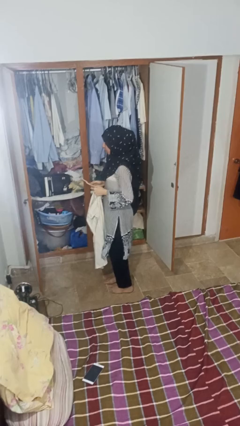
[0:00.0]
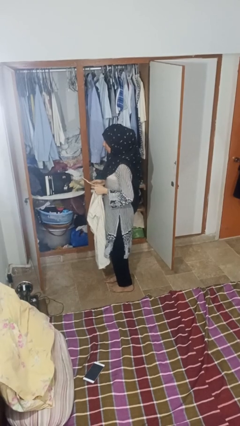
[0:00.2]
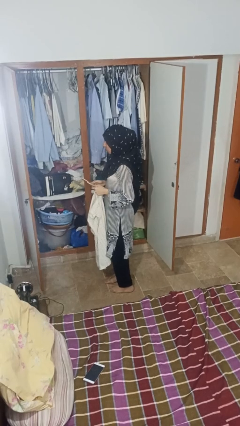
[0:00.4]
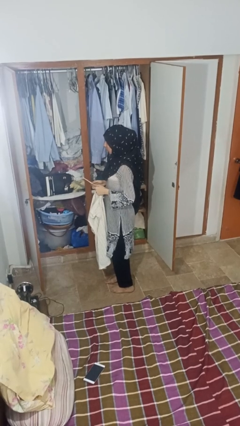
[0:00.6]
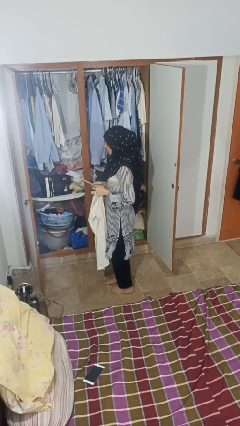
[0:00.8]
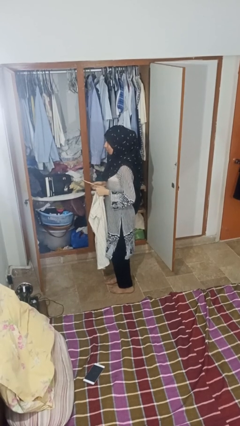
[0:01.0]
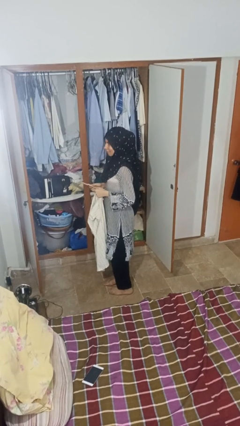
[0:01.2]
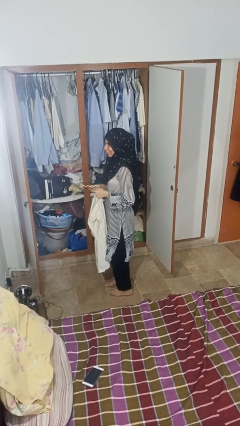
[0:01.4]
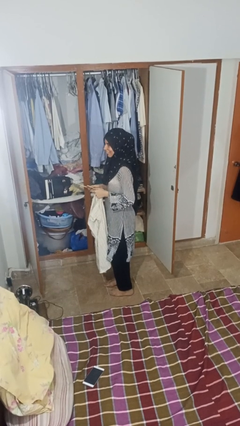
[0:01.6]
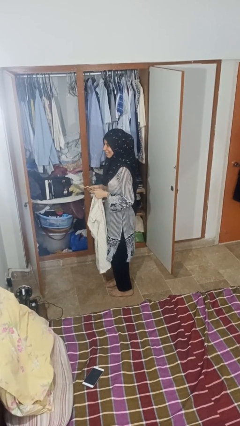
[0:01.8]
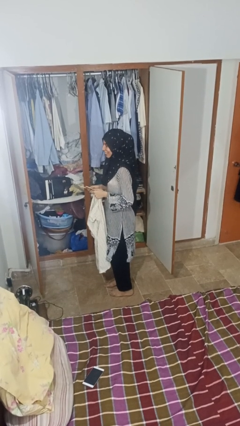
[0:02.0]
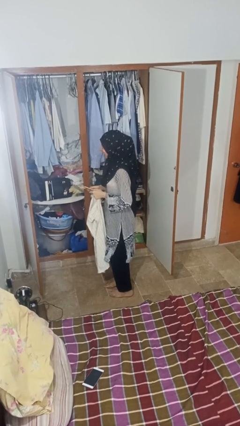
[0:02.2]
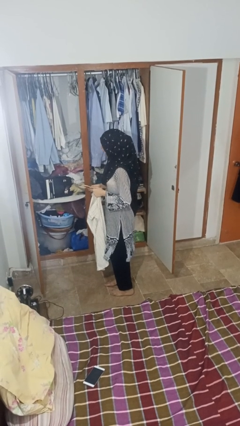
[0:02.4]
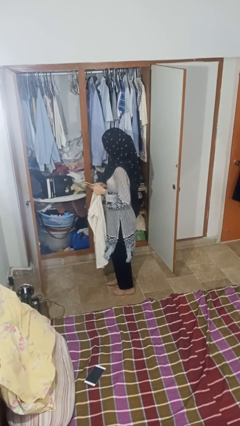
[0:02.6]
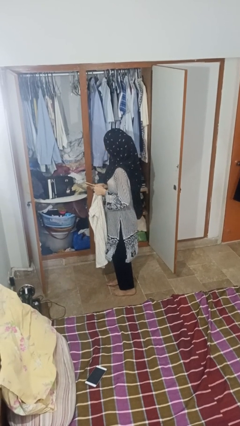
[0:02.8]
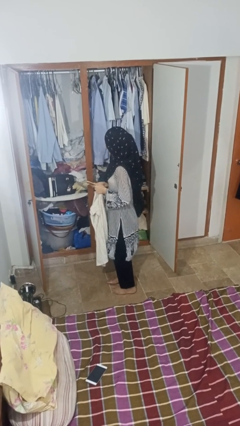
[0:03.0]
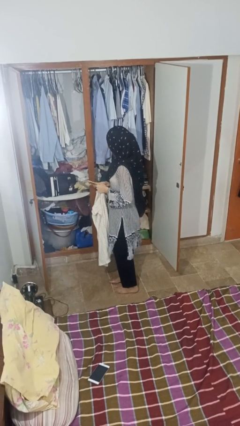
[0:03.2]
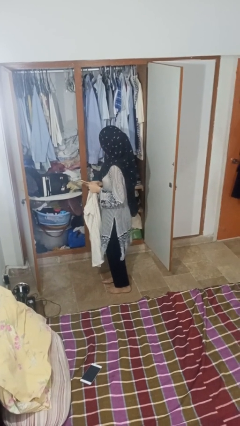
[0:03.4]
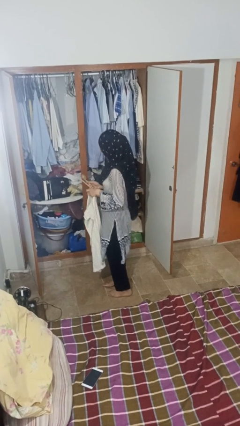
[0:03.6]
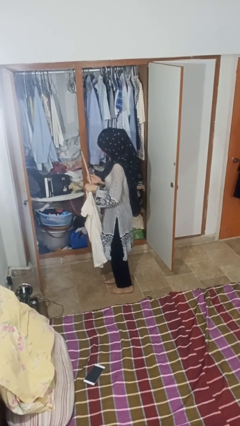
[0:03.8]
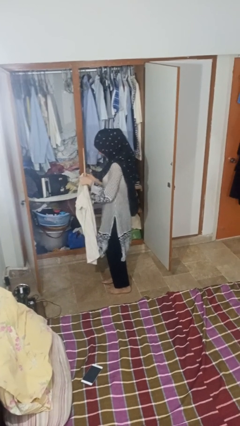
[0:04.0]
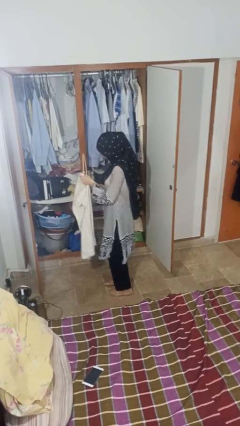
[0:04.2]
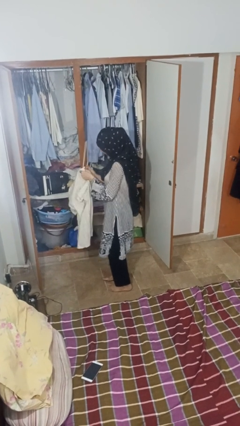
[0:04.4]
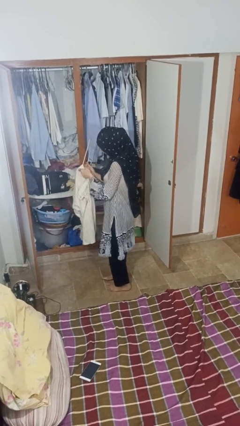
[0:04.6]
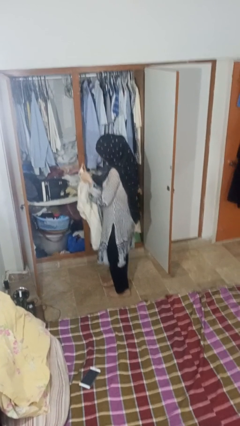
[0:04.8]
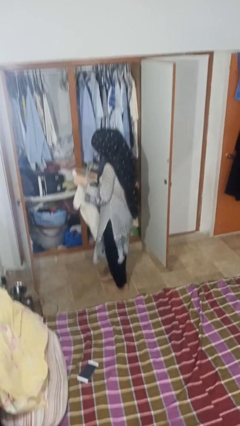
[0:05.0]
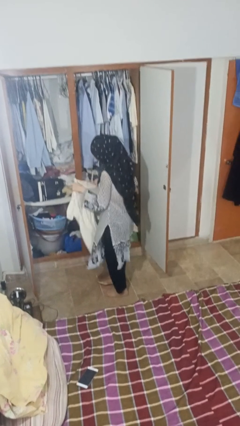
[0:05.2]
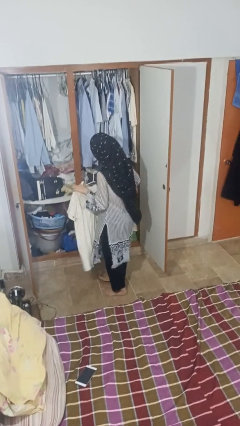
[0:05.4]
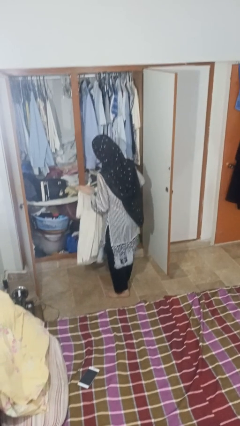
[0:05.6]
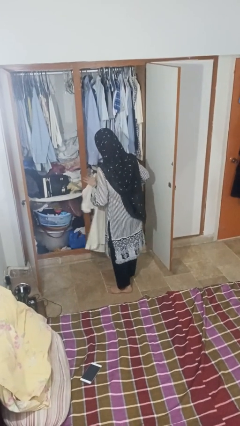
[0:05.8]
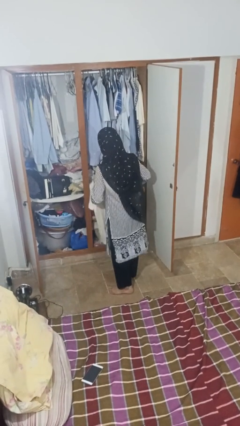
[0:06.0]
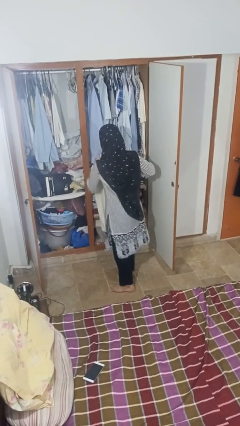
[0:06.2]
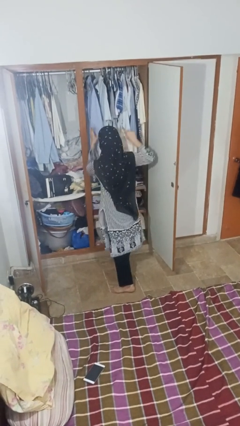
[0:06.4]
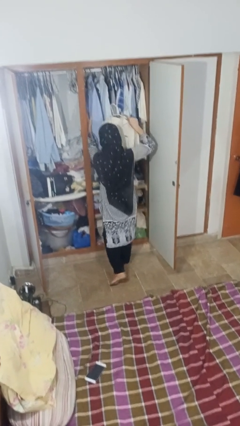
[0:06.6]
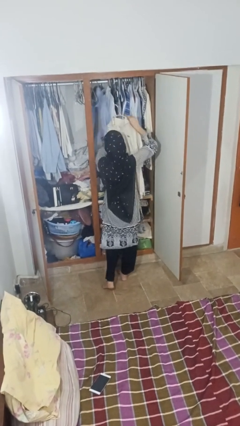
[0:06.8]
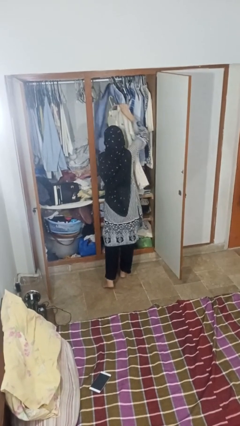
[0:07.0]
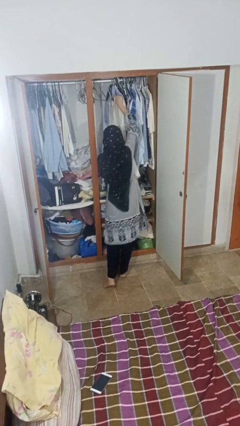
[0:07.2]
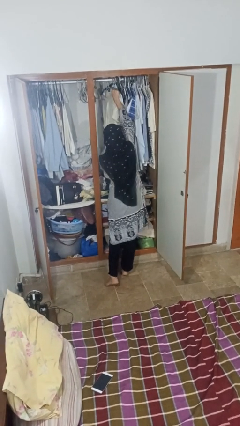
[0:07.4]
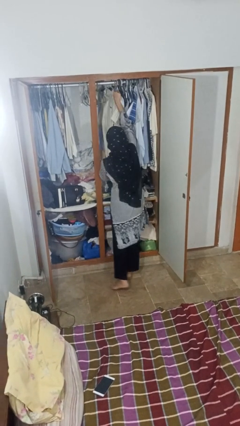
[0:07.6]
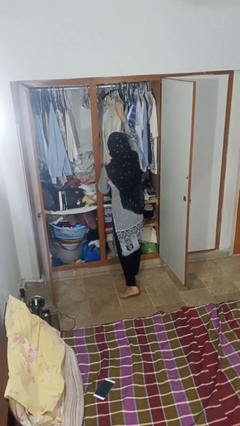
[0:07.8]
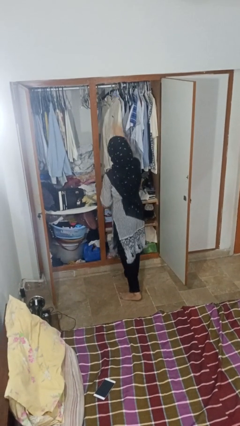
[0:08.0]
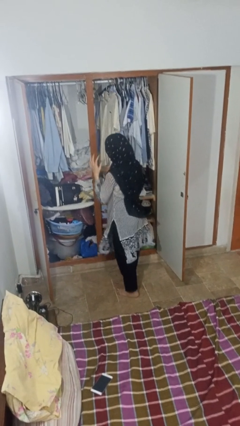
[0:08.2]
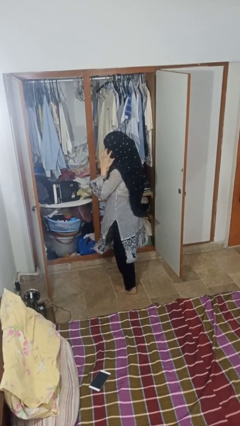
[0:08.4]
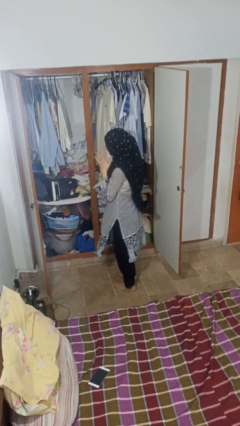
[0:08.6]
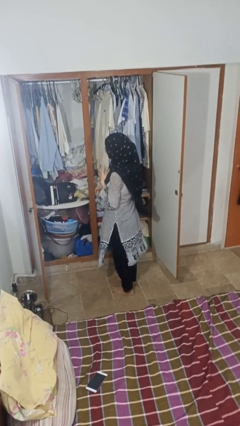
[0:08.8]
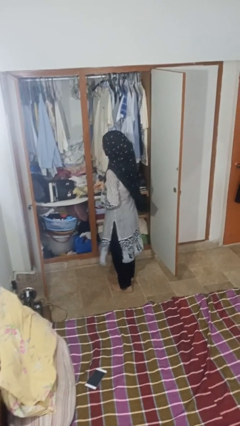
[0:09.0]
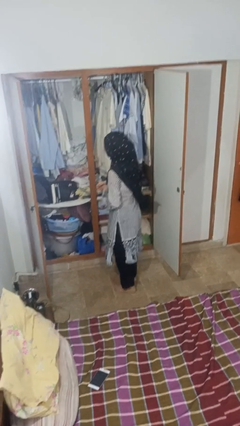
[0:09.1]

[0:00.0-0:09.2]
person puts clothes into closet

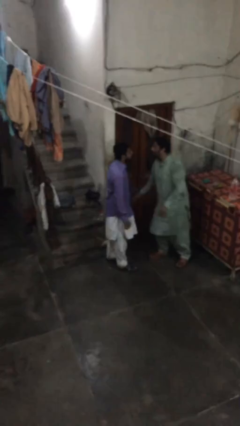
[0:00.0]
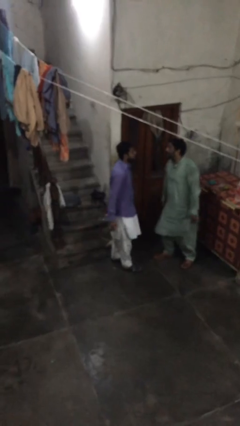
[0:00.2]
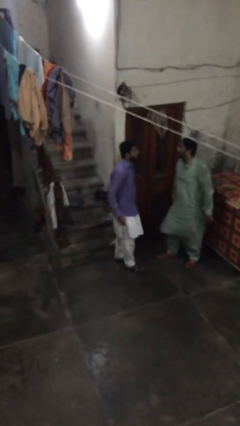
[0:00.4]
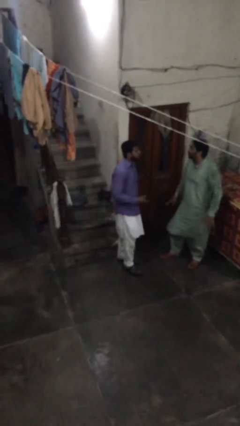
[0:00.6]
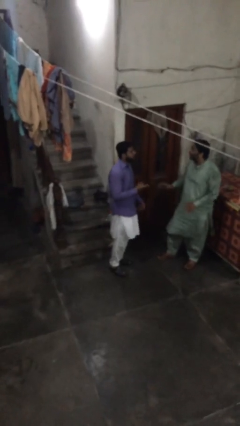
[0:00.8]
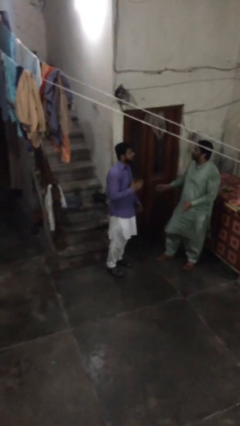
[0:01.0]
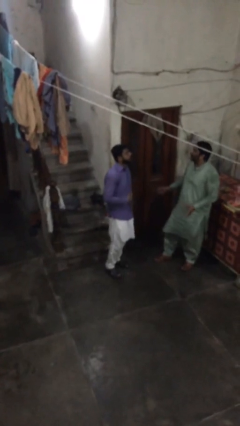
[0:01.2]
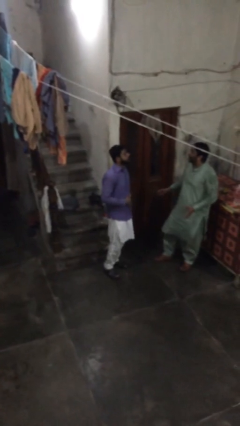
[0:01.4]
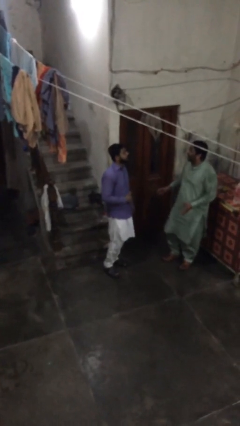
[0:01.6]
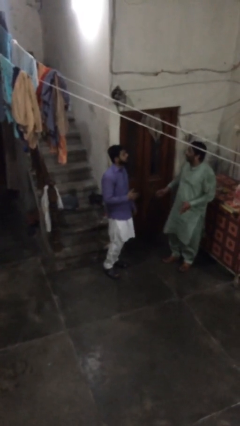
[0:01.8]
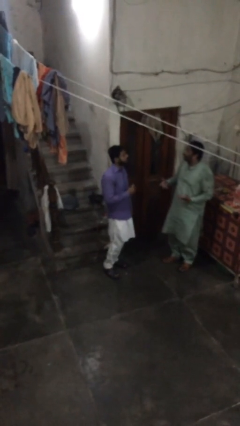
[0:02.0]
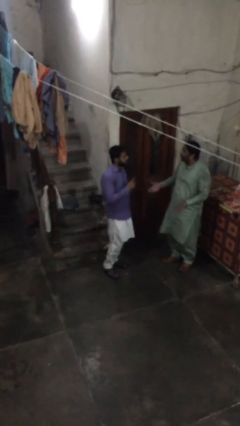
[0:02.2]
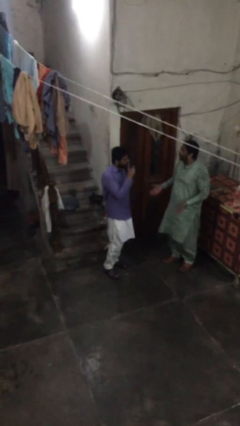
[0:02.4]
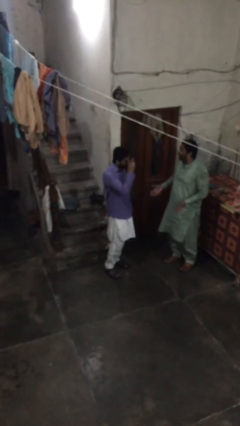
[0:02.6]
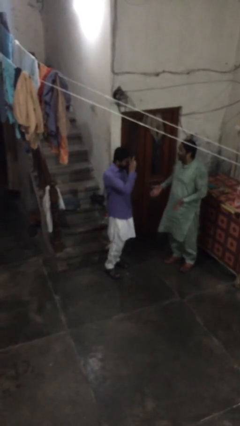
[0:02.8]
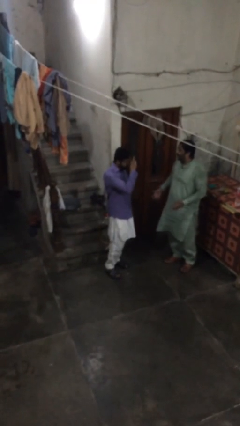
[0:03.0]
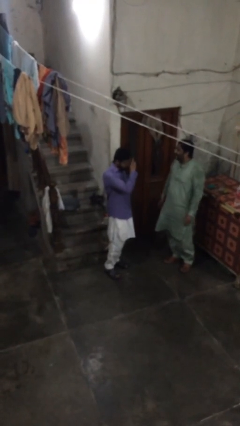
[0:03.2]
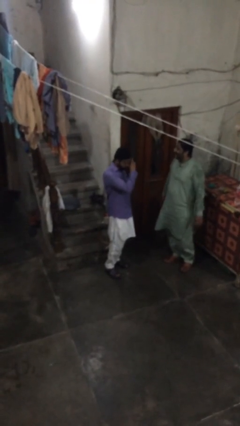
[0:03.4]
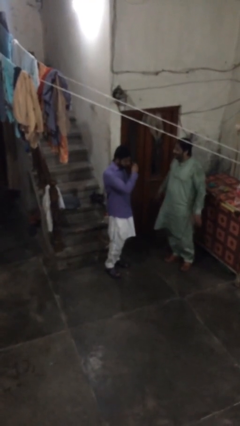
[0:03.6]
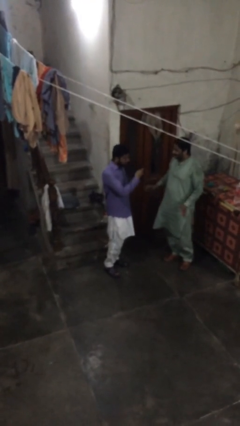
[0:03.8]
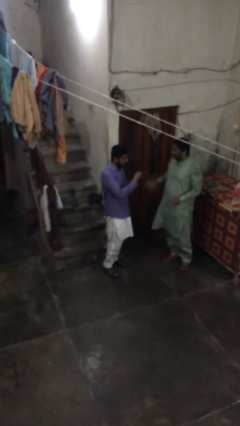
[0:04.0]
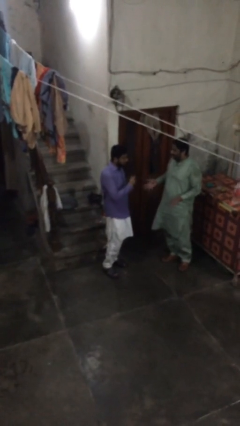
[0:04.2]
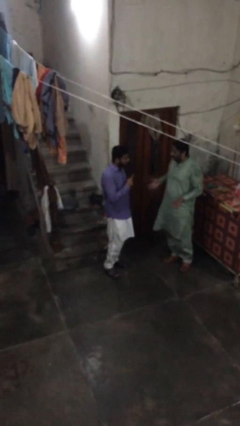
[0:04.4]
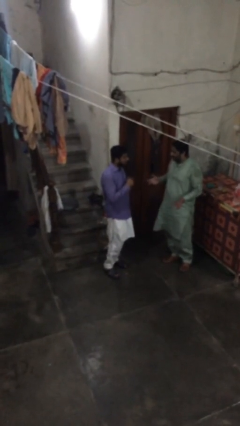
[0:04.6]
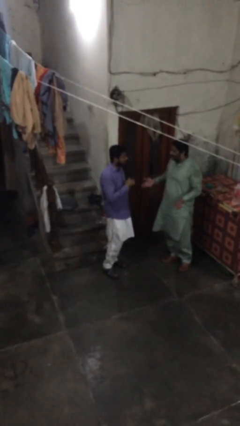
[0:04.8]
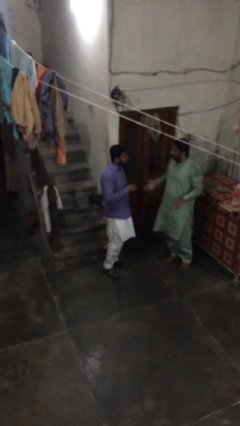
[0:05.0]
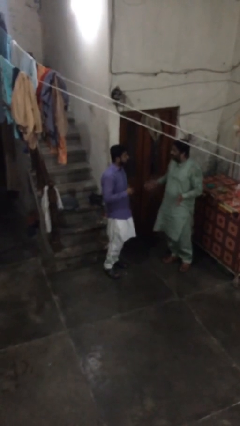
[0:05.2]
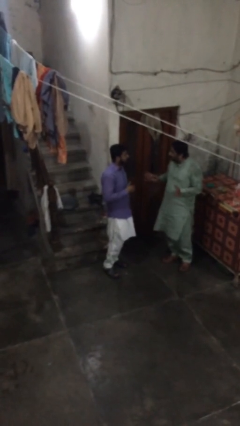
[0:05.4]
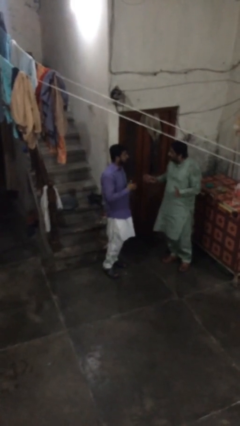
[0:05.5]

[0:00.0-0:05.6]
person talks to person

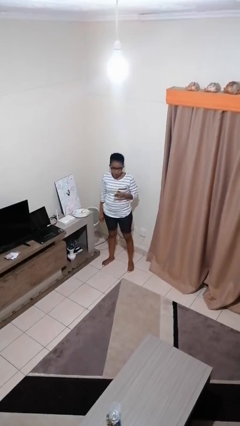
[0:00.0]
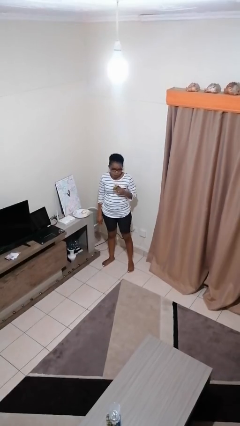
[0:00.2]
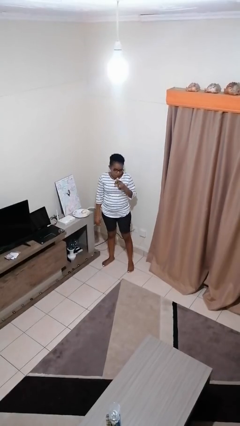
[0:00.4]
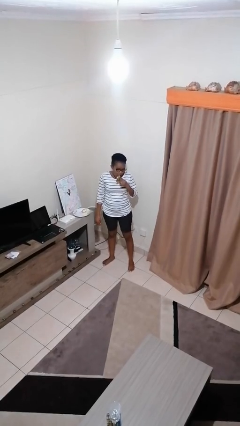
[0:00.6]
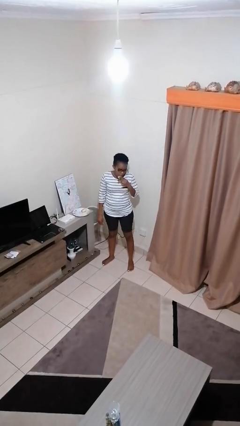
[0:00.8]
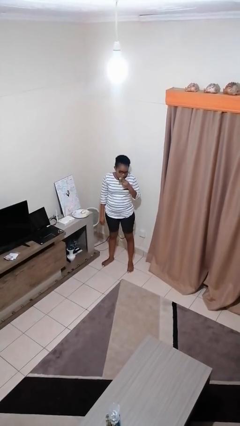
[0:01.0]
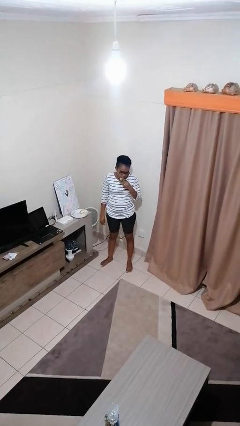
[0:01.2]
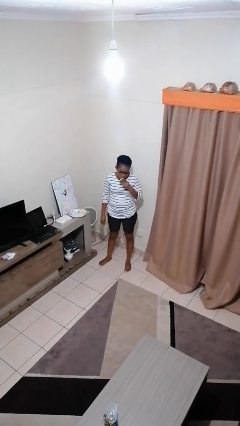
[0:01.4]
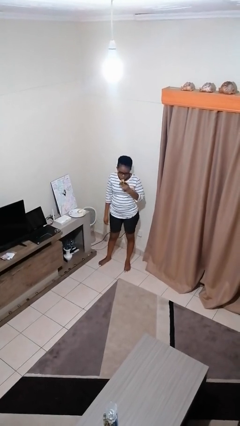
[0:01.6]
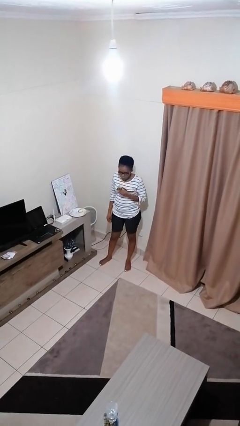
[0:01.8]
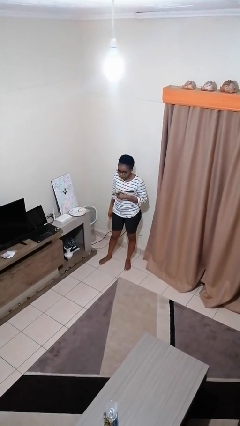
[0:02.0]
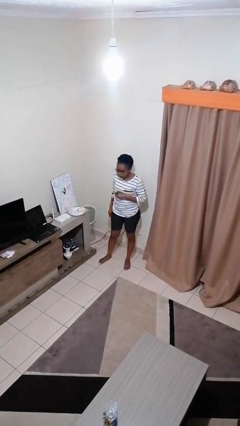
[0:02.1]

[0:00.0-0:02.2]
person eats banana

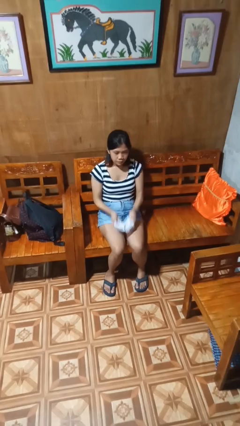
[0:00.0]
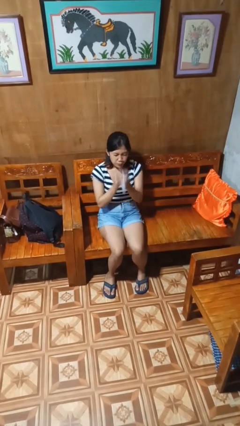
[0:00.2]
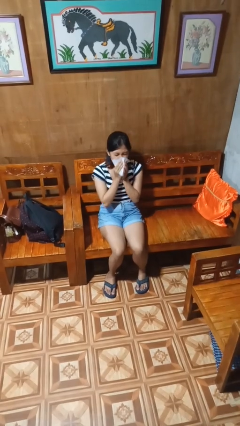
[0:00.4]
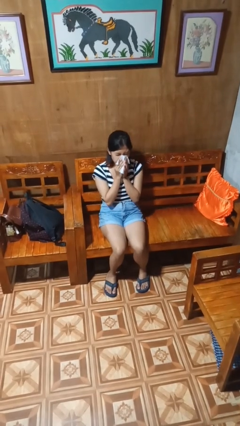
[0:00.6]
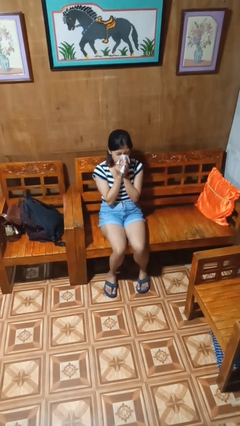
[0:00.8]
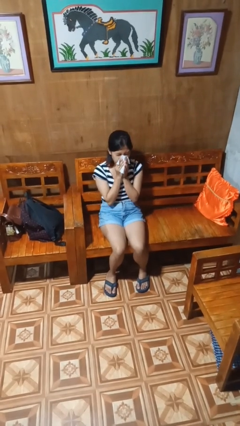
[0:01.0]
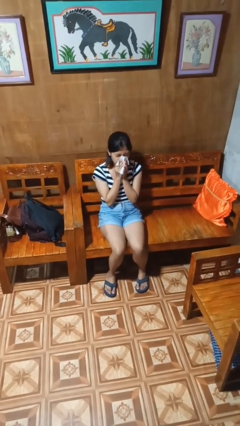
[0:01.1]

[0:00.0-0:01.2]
person blows nose
